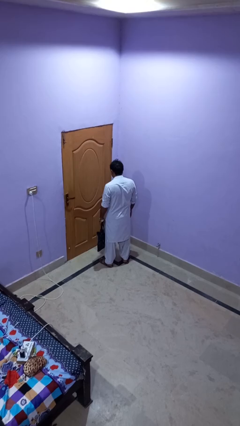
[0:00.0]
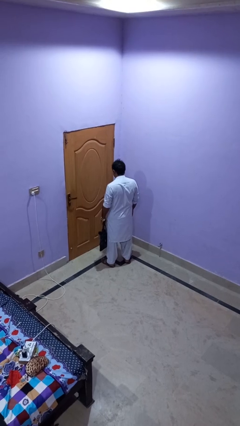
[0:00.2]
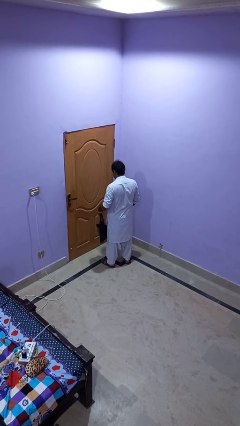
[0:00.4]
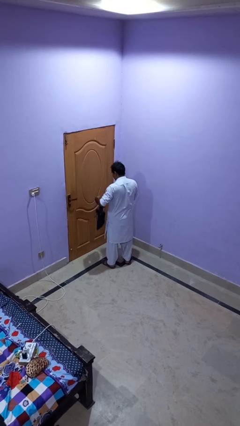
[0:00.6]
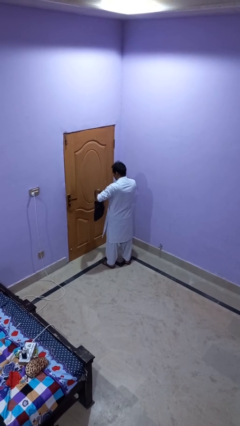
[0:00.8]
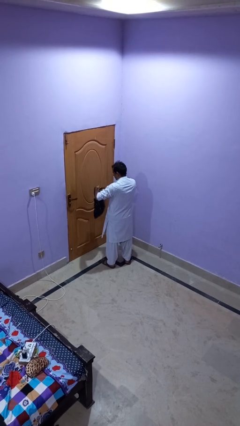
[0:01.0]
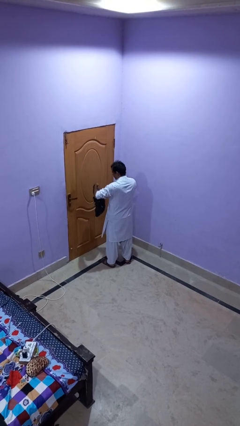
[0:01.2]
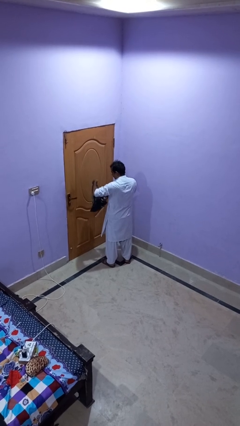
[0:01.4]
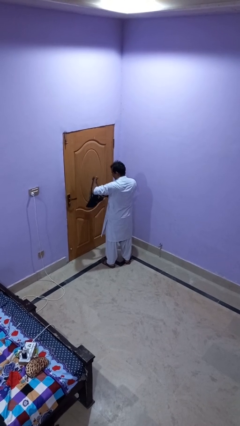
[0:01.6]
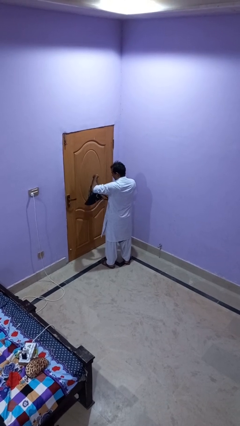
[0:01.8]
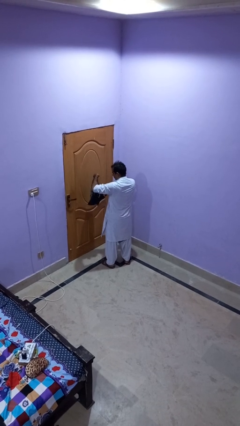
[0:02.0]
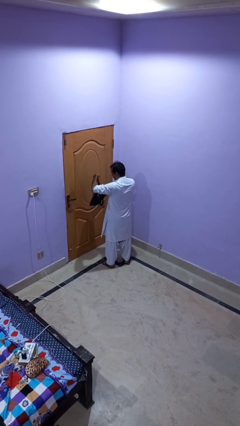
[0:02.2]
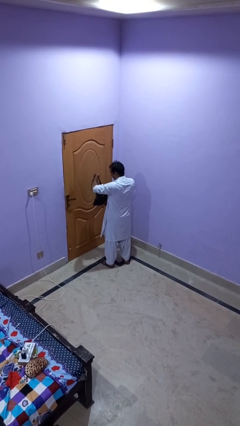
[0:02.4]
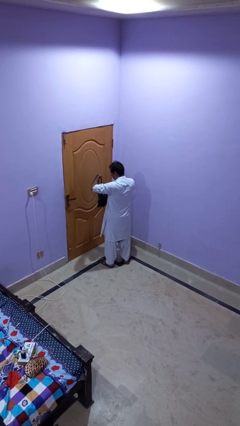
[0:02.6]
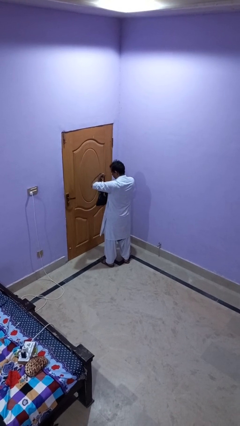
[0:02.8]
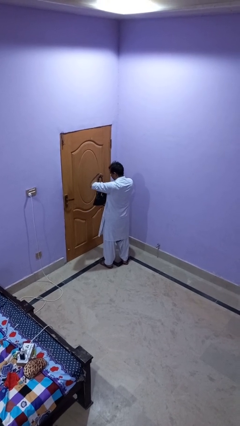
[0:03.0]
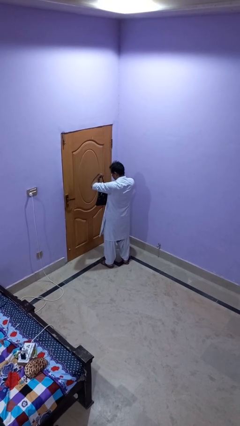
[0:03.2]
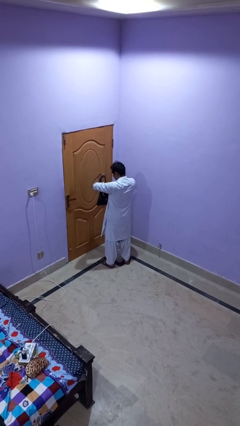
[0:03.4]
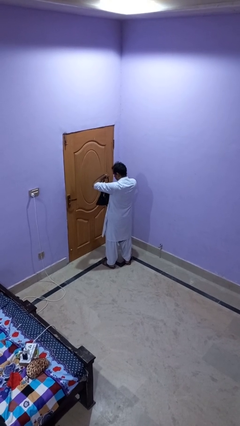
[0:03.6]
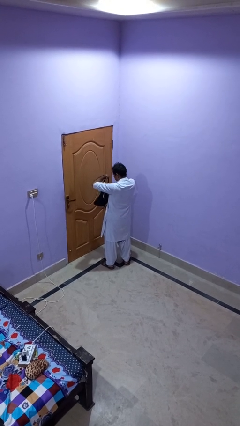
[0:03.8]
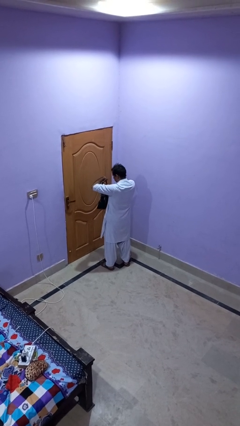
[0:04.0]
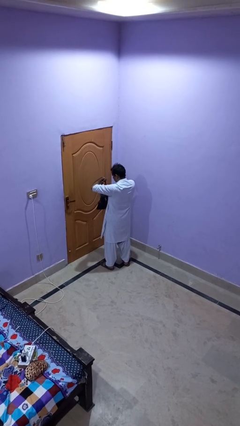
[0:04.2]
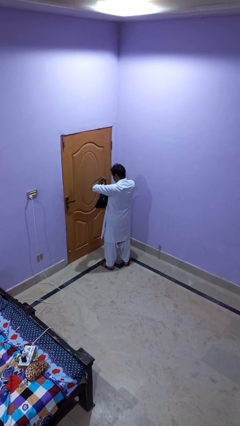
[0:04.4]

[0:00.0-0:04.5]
person searches in purse

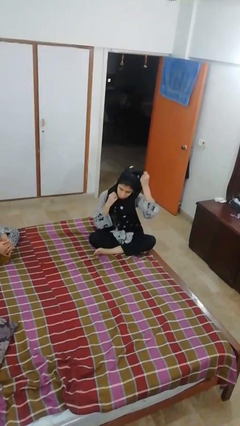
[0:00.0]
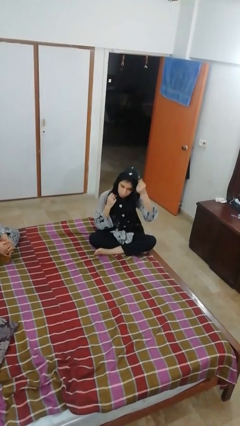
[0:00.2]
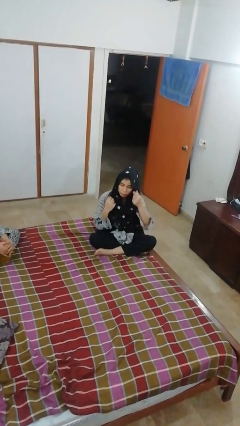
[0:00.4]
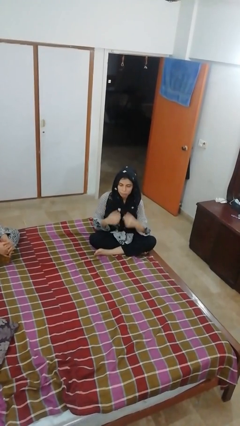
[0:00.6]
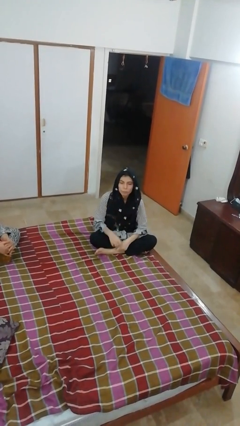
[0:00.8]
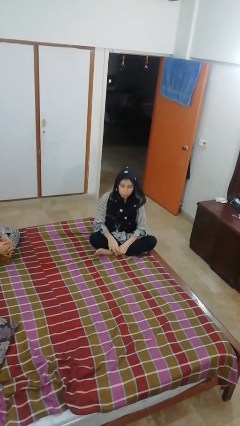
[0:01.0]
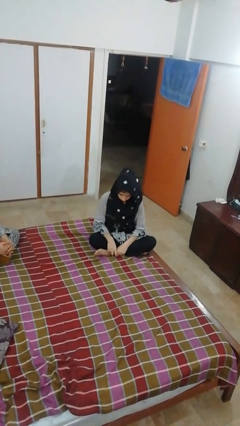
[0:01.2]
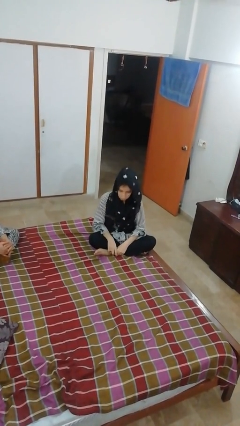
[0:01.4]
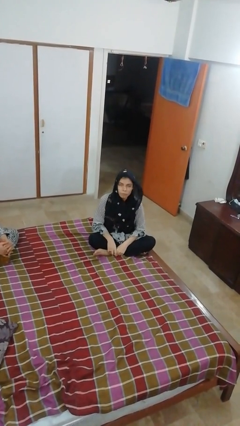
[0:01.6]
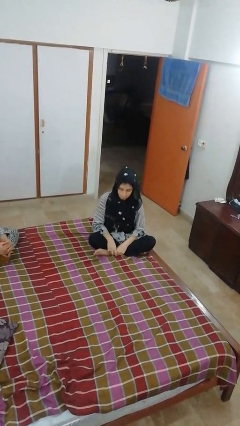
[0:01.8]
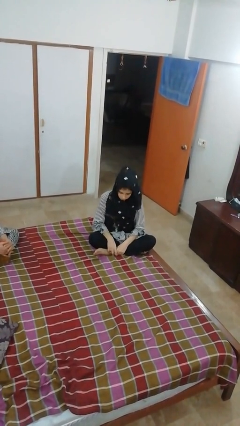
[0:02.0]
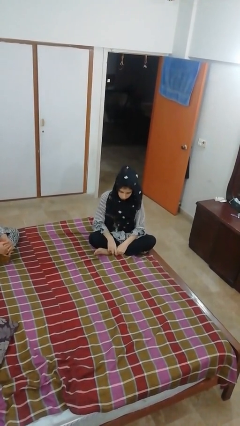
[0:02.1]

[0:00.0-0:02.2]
person nods head

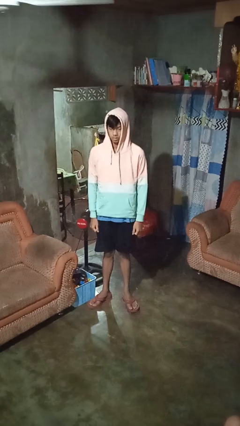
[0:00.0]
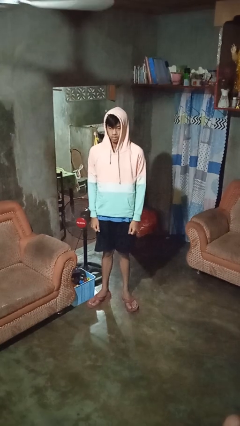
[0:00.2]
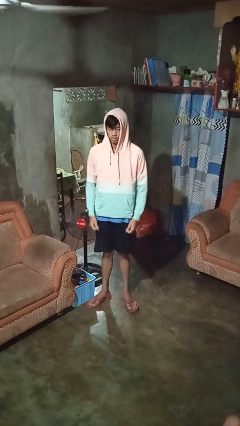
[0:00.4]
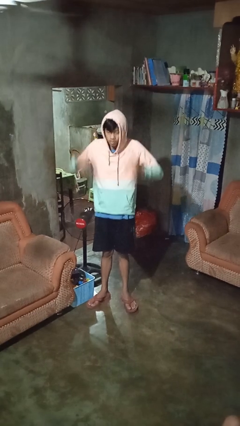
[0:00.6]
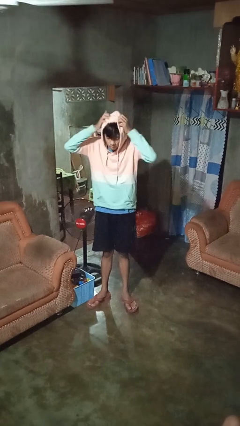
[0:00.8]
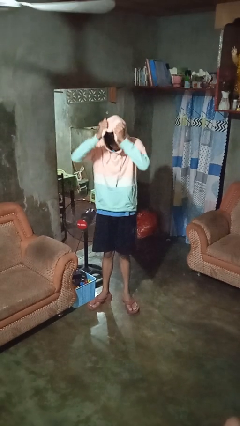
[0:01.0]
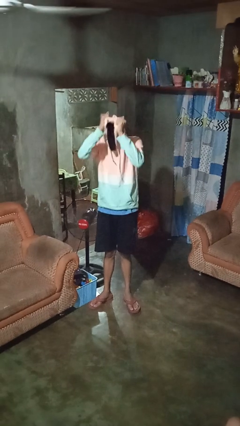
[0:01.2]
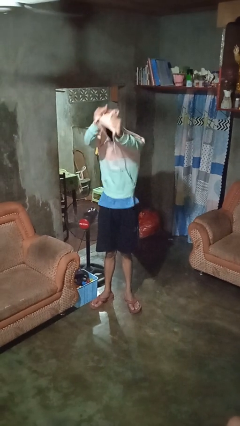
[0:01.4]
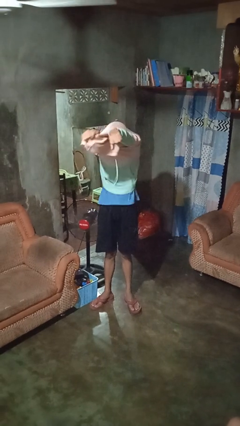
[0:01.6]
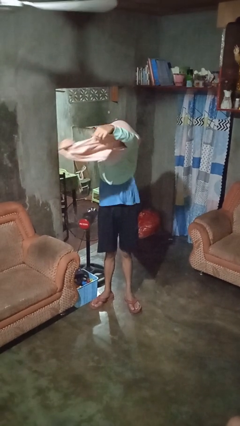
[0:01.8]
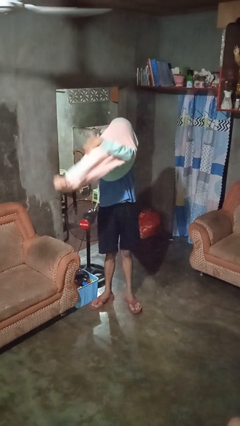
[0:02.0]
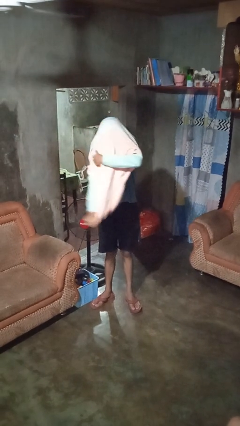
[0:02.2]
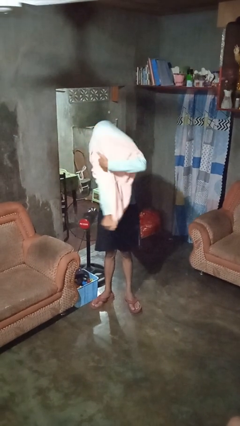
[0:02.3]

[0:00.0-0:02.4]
person takes off hoodie

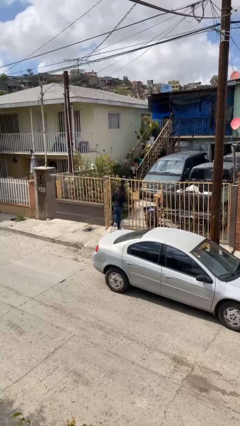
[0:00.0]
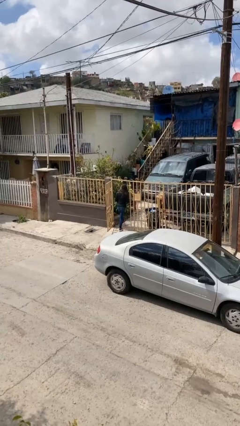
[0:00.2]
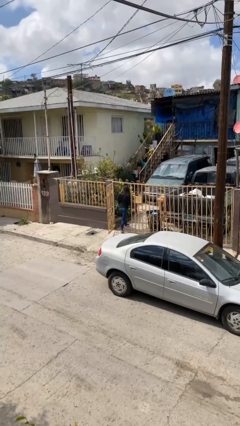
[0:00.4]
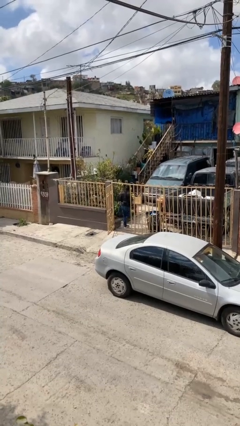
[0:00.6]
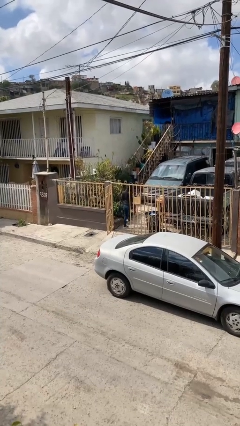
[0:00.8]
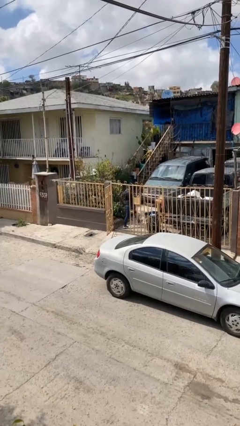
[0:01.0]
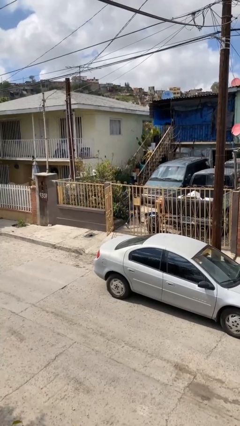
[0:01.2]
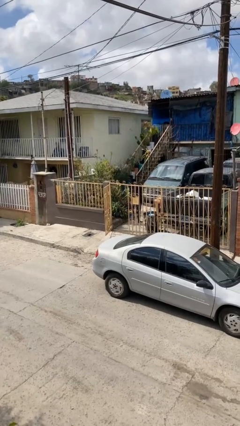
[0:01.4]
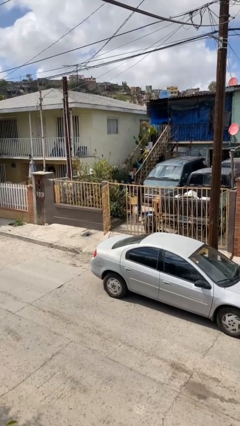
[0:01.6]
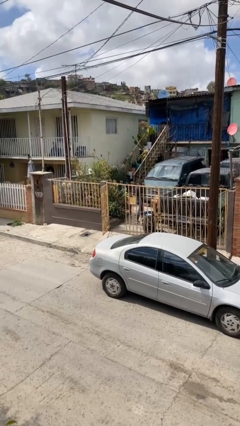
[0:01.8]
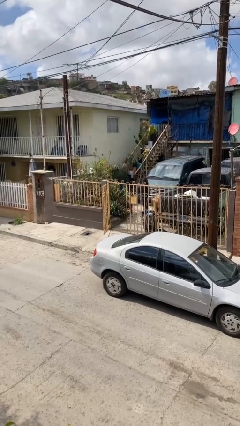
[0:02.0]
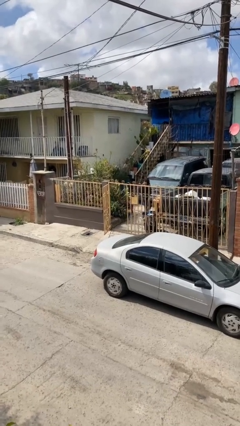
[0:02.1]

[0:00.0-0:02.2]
person exits scene through structure

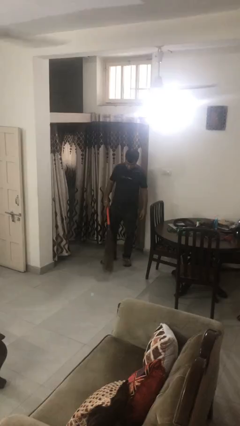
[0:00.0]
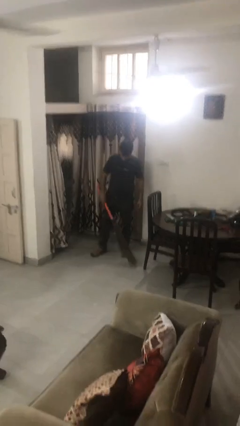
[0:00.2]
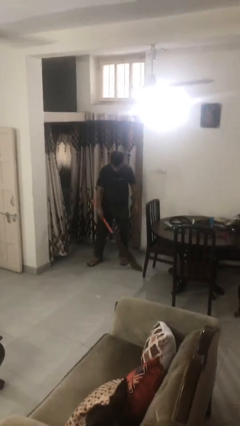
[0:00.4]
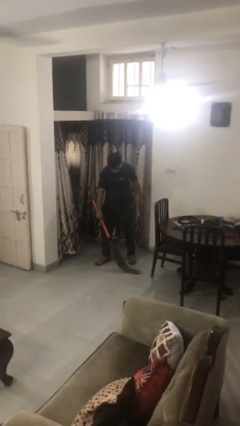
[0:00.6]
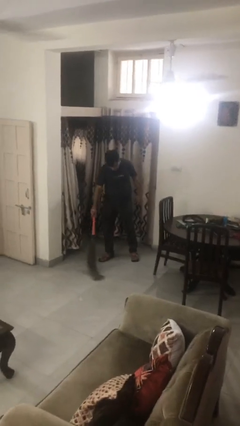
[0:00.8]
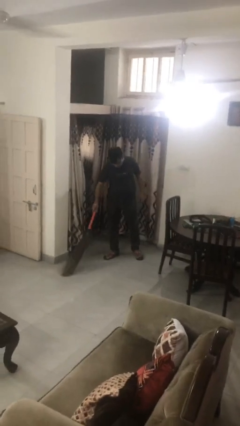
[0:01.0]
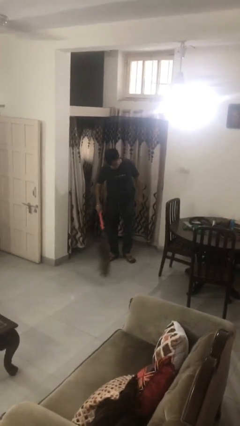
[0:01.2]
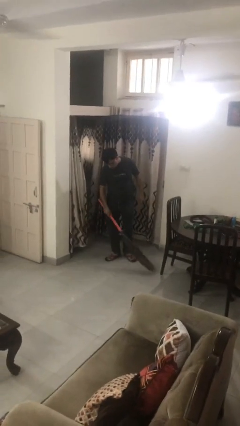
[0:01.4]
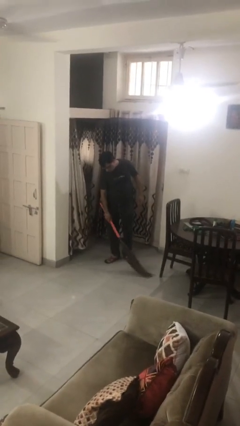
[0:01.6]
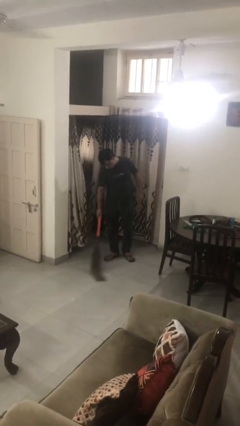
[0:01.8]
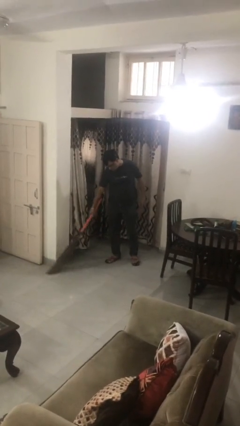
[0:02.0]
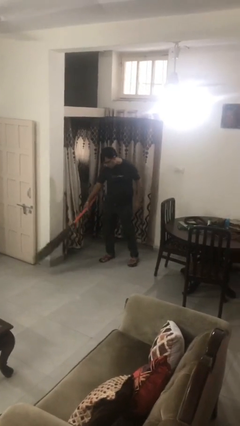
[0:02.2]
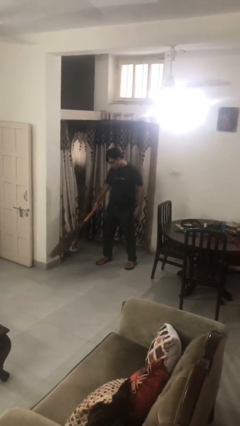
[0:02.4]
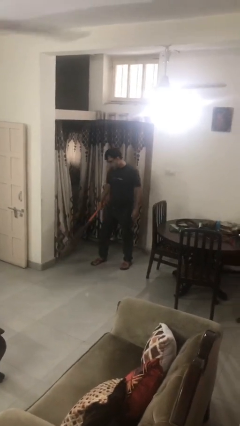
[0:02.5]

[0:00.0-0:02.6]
person sweeps floor

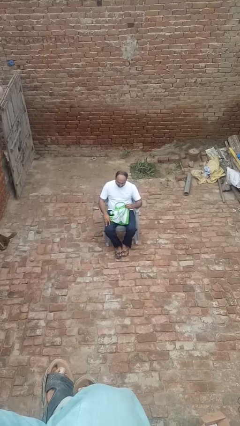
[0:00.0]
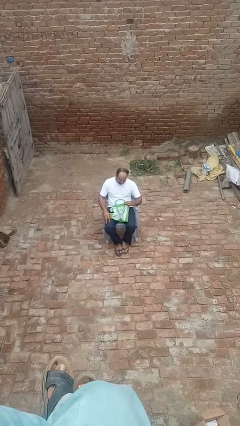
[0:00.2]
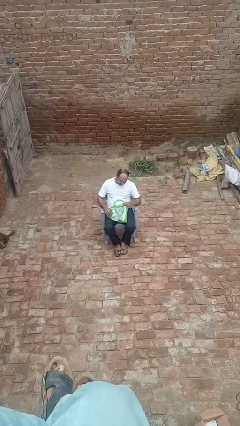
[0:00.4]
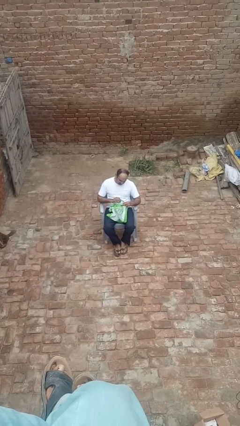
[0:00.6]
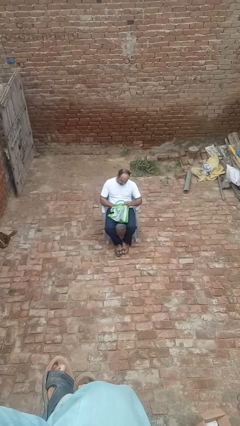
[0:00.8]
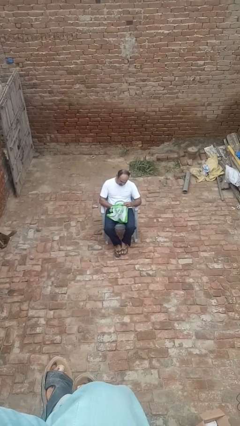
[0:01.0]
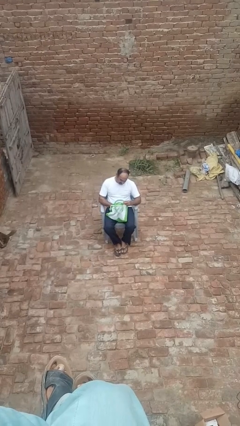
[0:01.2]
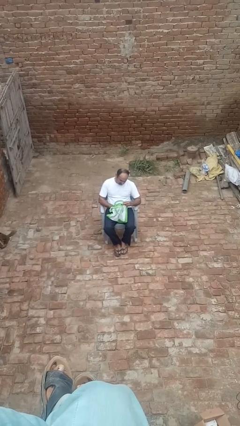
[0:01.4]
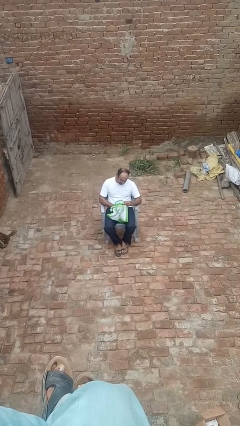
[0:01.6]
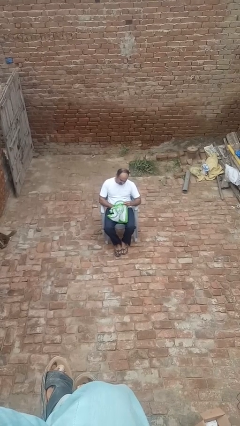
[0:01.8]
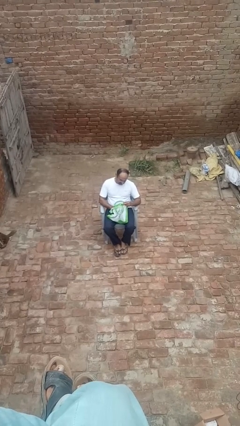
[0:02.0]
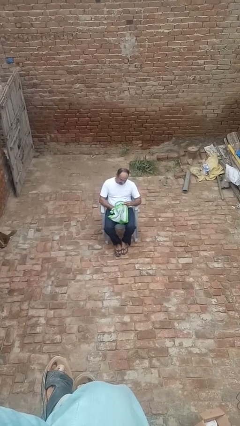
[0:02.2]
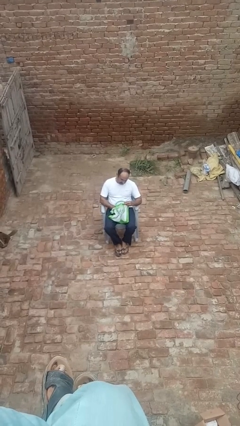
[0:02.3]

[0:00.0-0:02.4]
person searches in bag

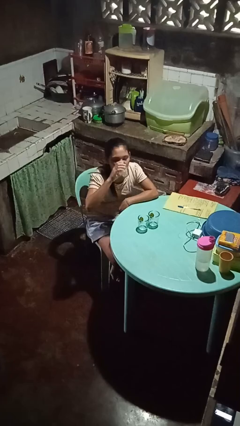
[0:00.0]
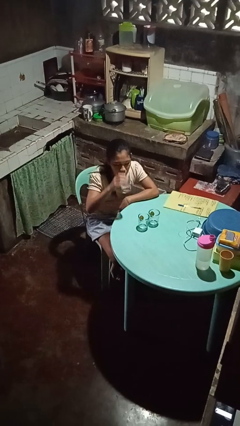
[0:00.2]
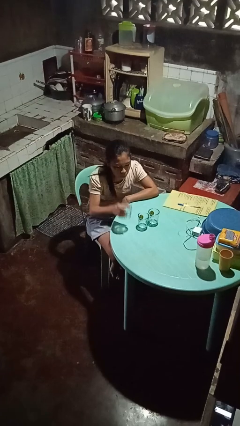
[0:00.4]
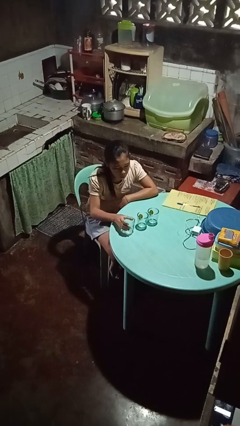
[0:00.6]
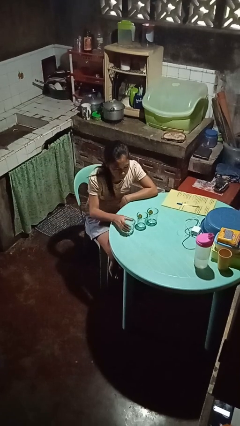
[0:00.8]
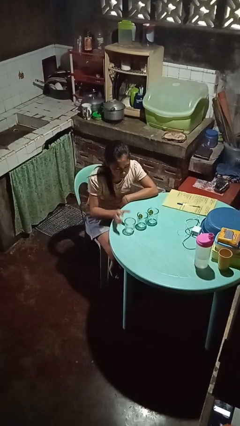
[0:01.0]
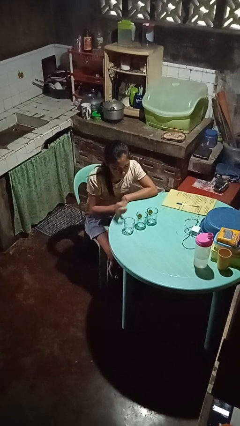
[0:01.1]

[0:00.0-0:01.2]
person puts down object on table
